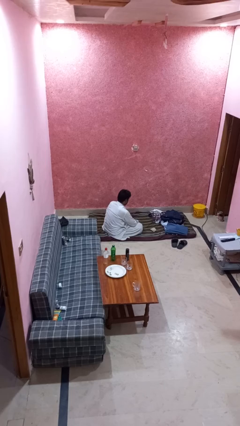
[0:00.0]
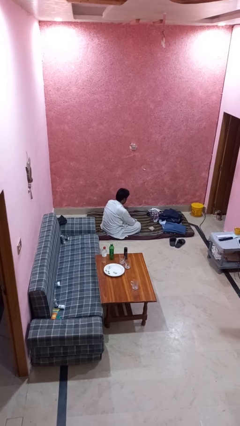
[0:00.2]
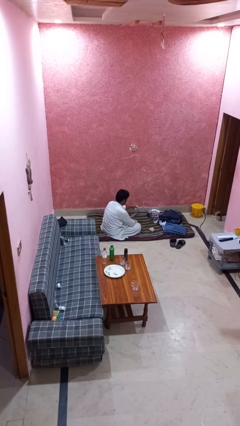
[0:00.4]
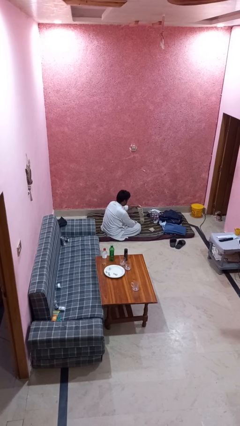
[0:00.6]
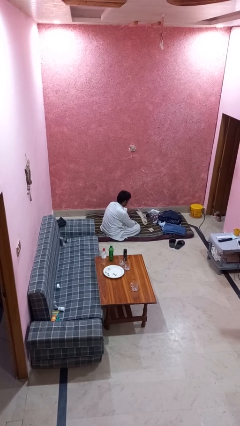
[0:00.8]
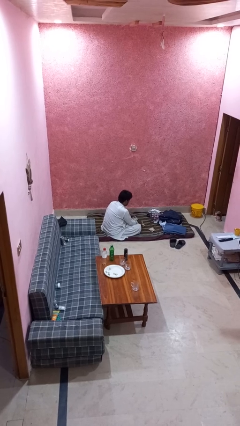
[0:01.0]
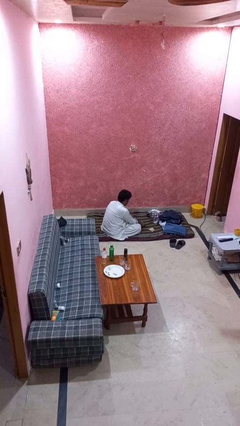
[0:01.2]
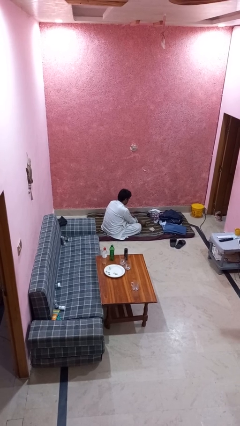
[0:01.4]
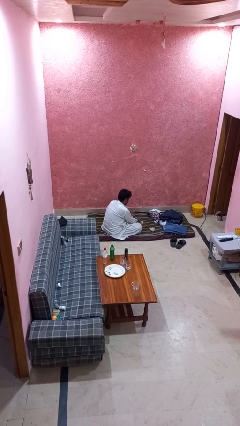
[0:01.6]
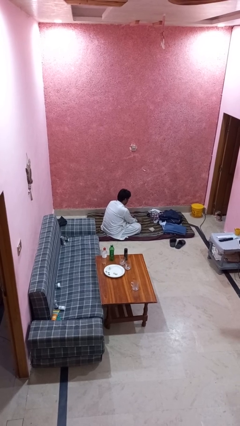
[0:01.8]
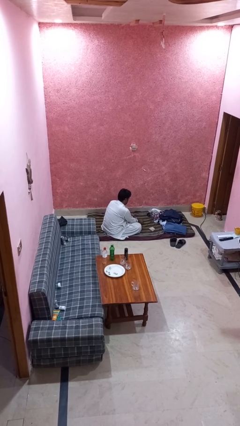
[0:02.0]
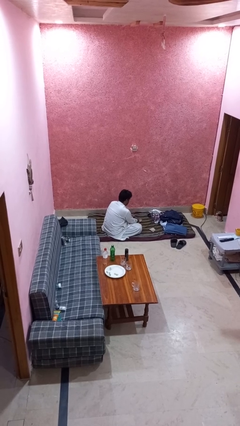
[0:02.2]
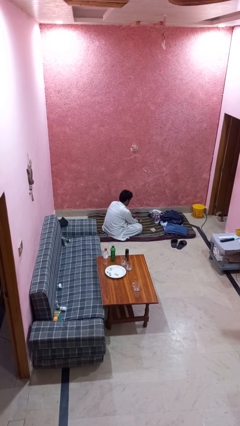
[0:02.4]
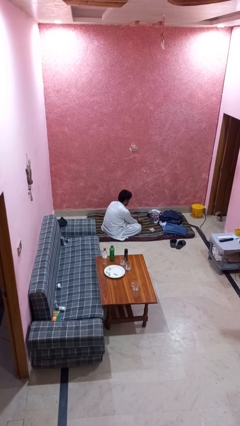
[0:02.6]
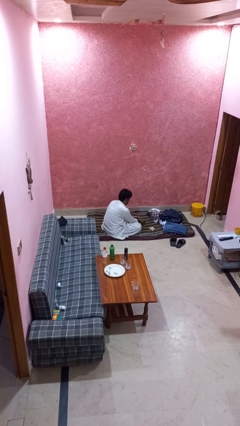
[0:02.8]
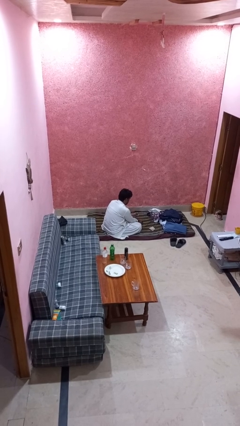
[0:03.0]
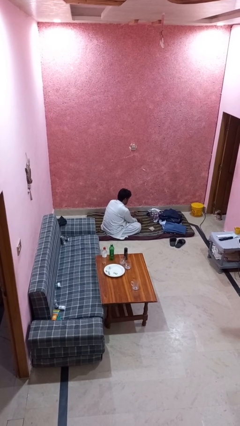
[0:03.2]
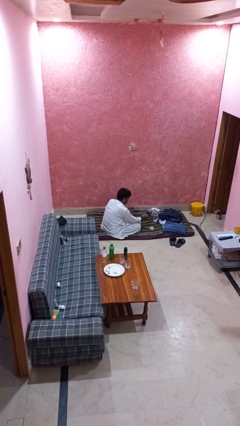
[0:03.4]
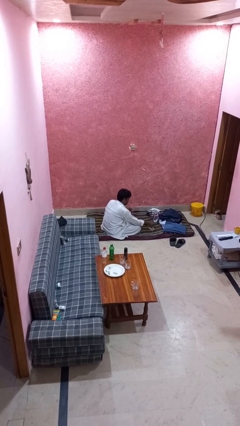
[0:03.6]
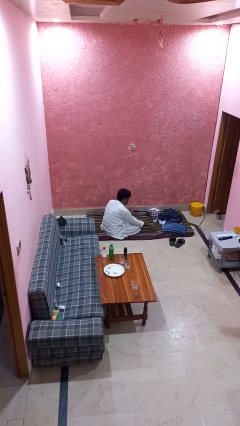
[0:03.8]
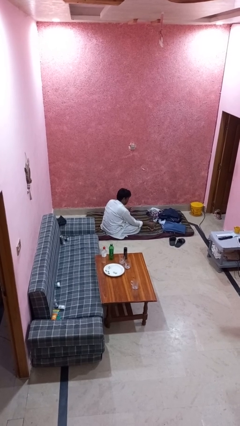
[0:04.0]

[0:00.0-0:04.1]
person folds socks

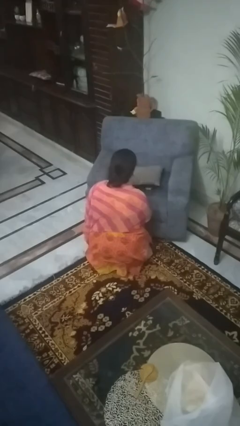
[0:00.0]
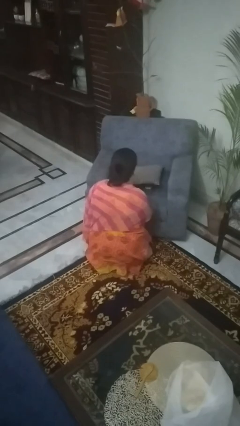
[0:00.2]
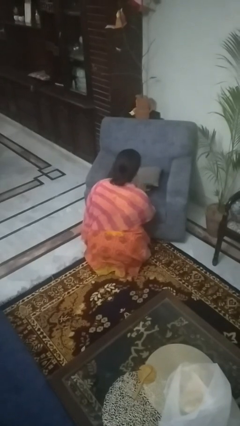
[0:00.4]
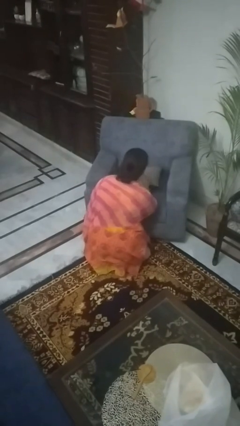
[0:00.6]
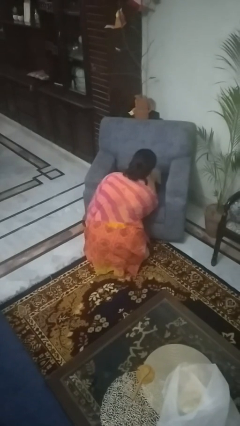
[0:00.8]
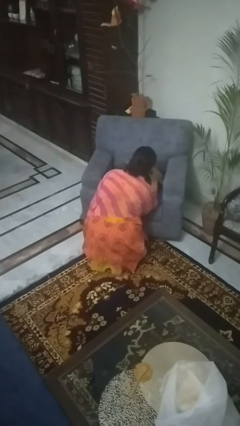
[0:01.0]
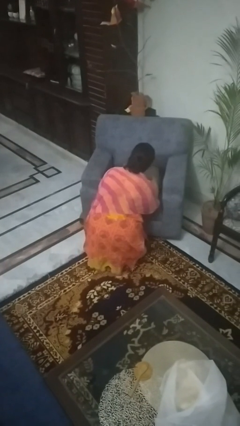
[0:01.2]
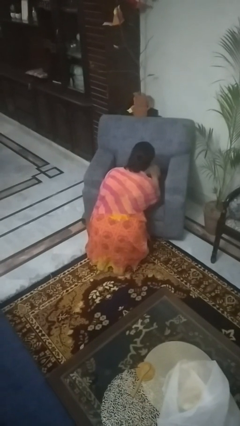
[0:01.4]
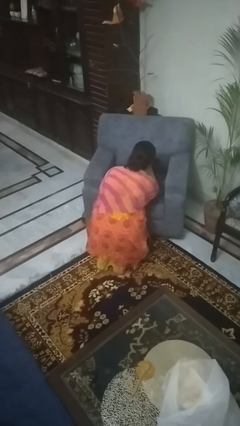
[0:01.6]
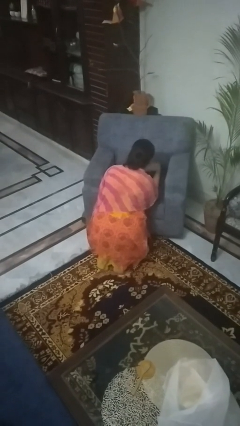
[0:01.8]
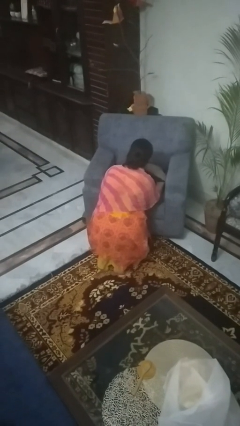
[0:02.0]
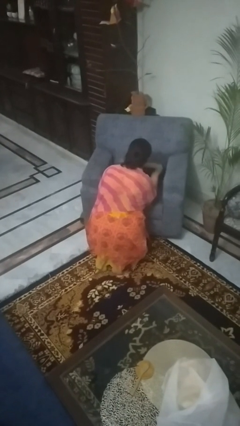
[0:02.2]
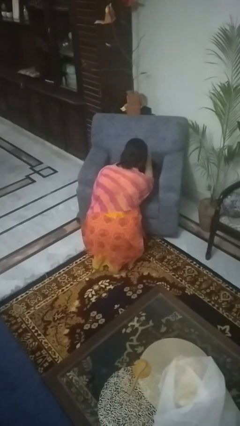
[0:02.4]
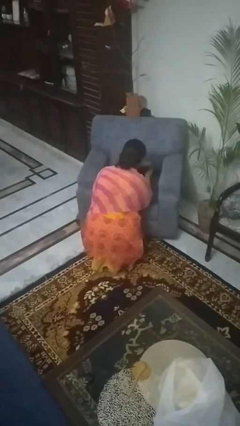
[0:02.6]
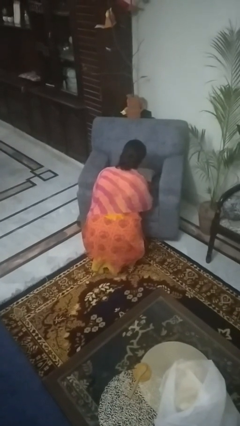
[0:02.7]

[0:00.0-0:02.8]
person searches in couch

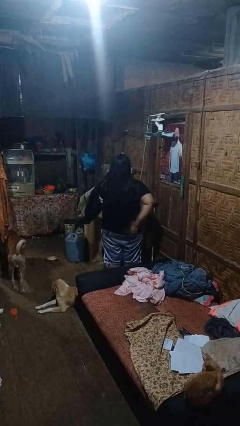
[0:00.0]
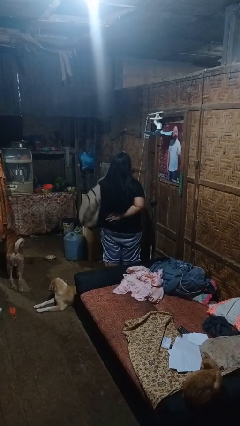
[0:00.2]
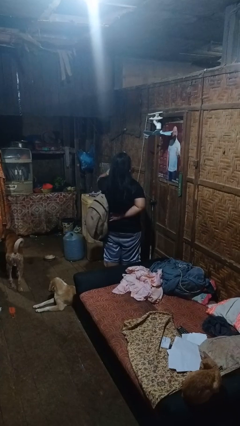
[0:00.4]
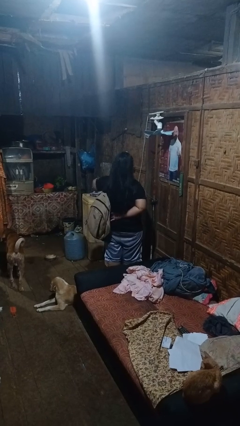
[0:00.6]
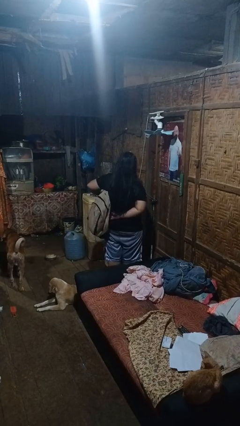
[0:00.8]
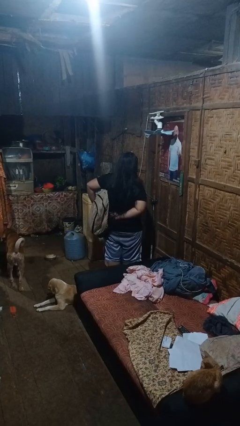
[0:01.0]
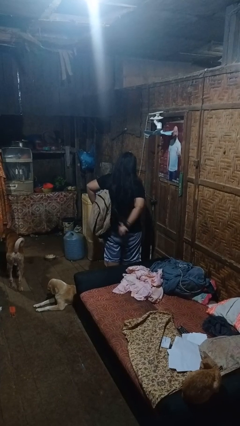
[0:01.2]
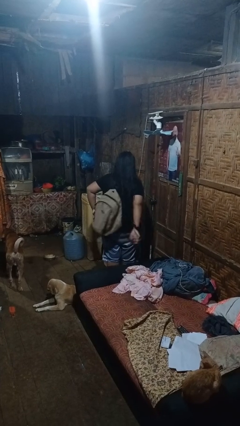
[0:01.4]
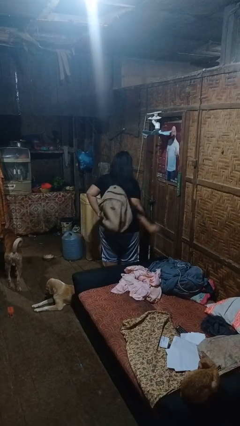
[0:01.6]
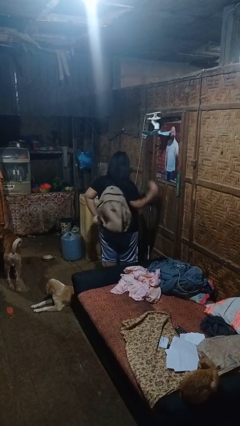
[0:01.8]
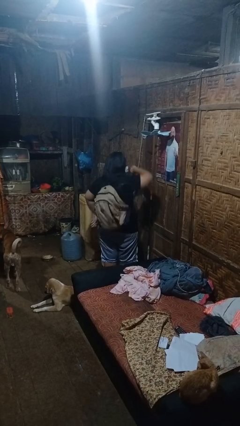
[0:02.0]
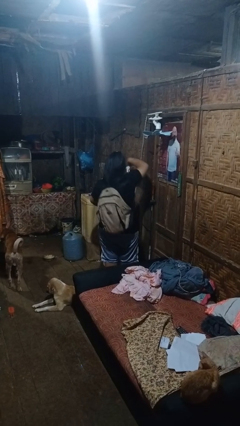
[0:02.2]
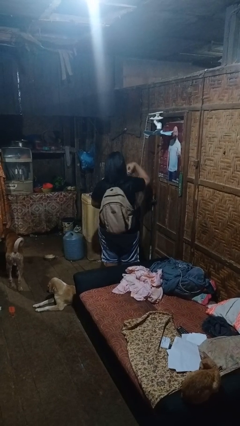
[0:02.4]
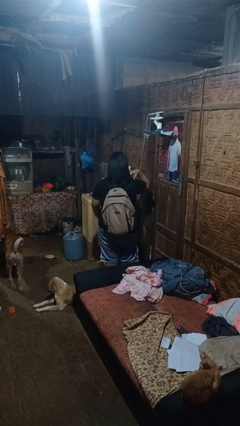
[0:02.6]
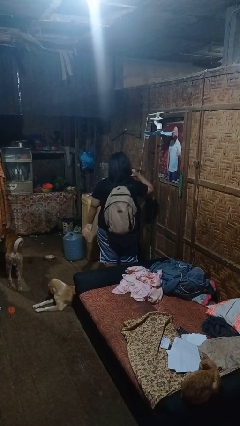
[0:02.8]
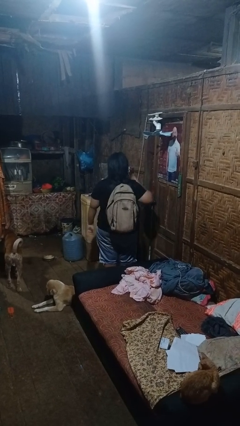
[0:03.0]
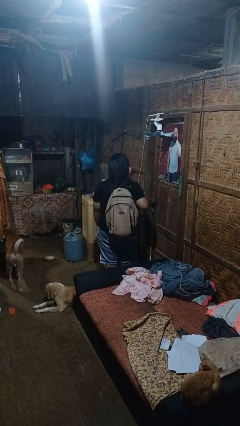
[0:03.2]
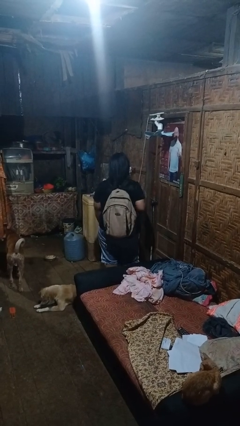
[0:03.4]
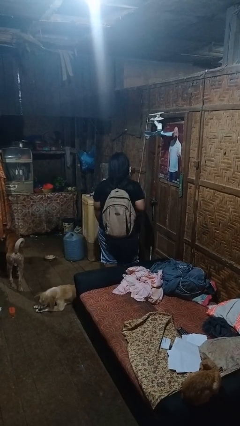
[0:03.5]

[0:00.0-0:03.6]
person puts on backpack

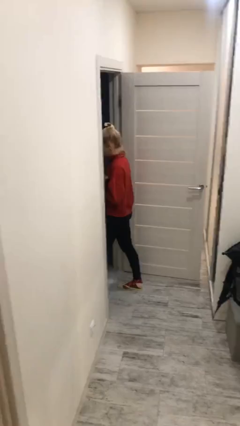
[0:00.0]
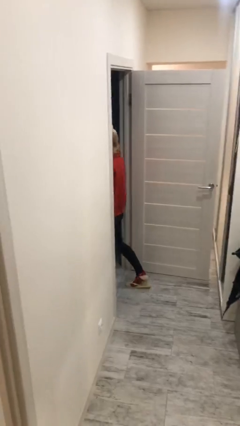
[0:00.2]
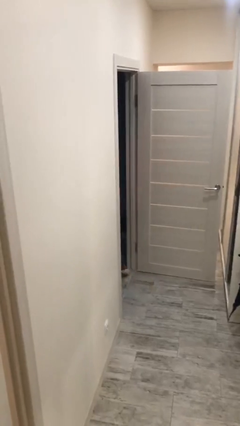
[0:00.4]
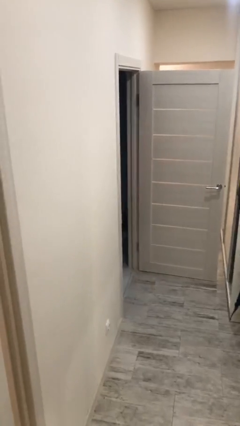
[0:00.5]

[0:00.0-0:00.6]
person exits scene through structure

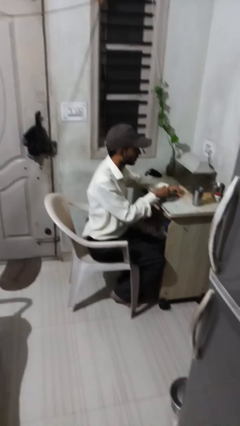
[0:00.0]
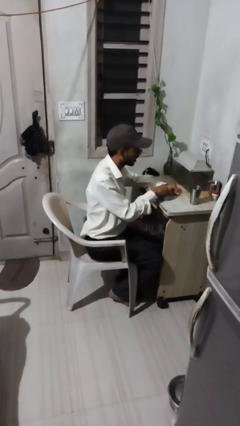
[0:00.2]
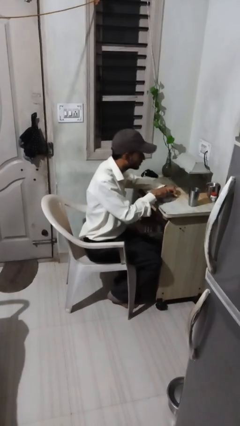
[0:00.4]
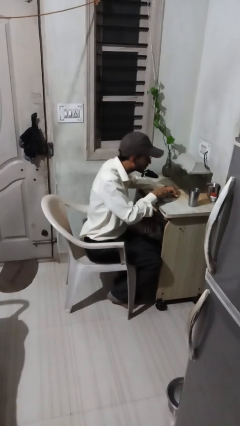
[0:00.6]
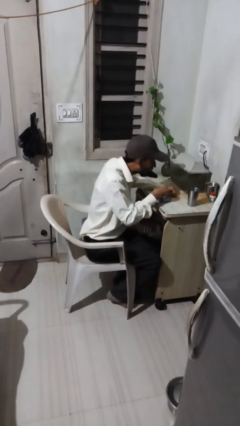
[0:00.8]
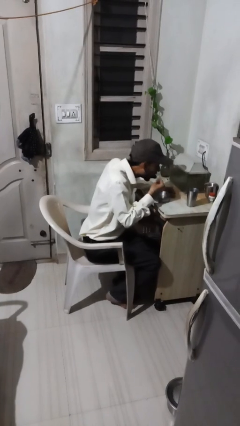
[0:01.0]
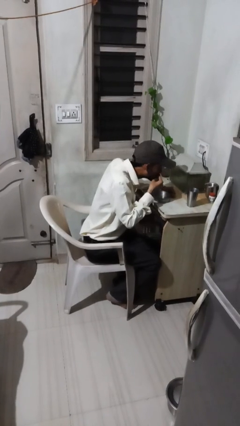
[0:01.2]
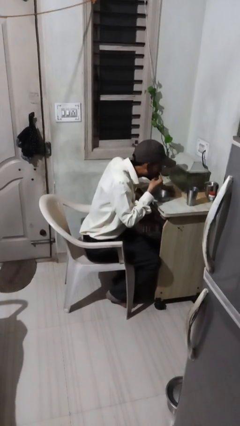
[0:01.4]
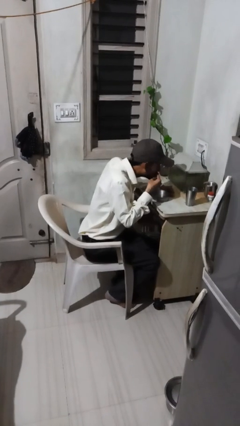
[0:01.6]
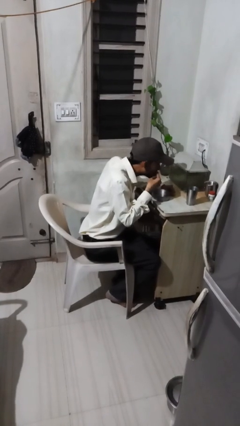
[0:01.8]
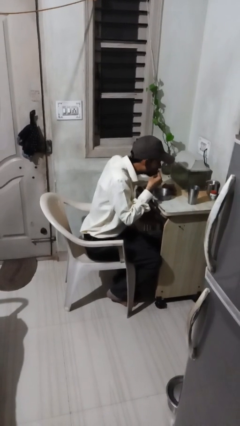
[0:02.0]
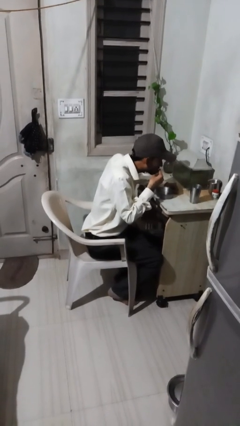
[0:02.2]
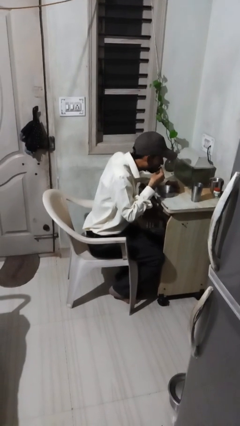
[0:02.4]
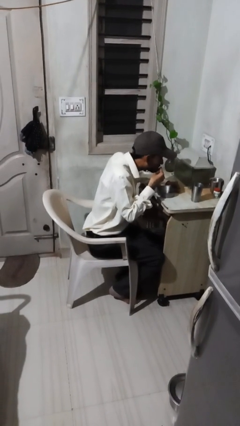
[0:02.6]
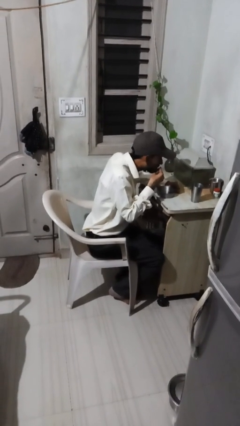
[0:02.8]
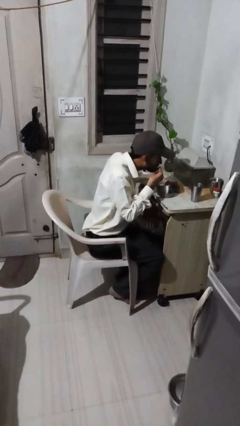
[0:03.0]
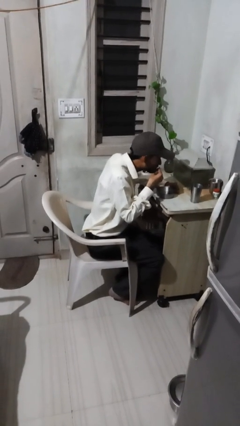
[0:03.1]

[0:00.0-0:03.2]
person eats with hands

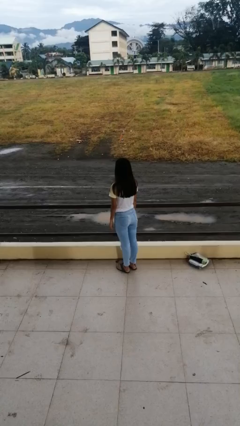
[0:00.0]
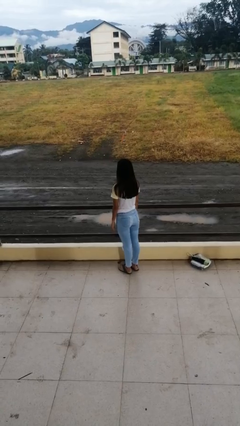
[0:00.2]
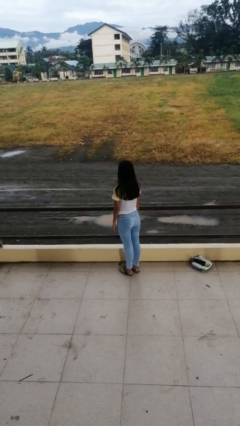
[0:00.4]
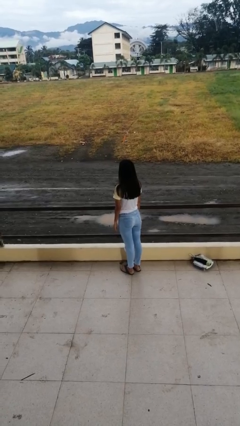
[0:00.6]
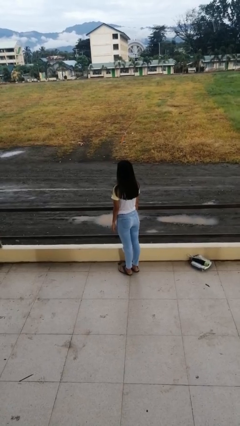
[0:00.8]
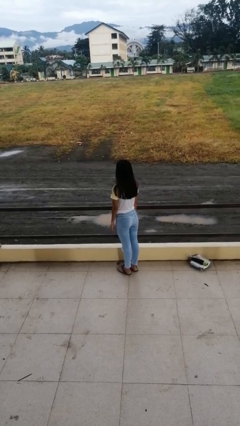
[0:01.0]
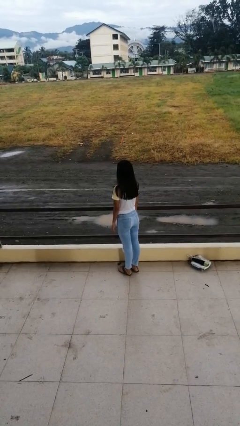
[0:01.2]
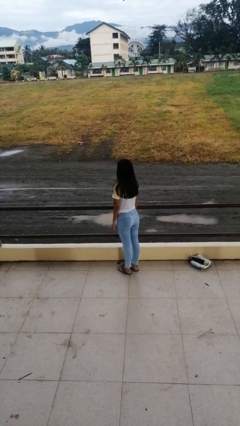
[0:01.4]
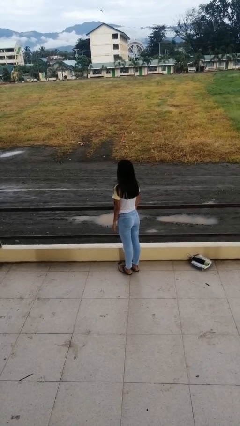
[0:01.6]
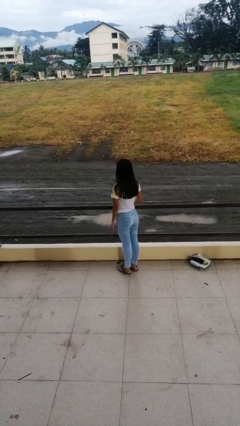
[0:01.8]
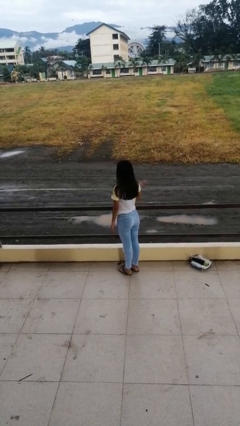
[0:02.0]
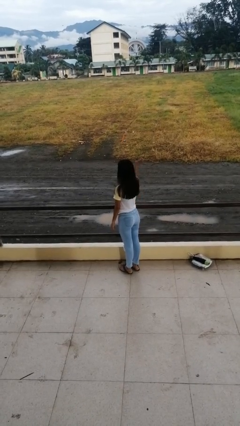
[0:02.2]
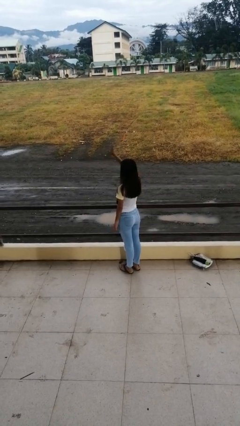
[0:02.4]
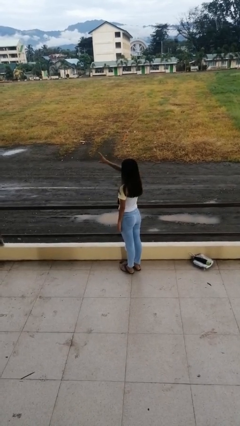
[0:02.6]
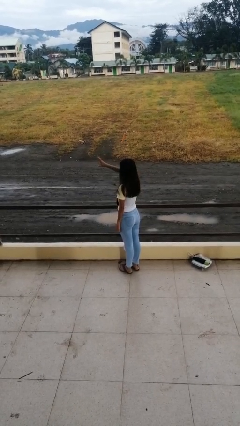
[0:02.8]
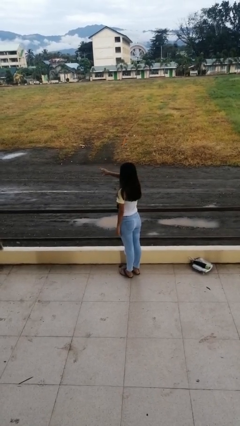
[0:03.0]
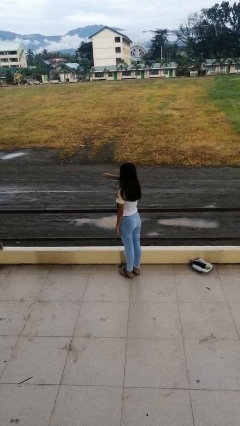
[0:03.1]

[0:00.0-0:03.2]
person gestures swipe left
